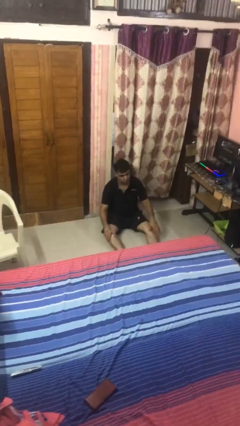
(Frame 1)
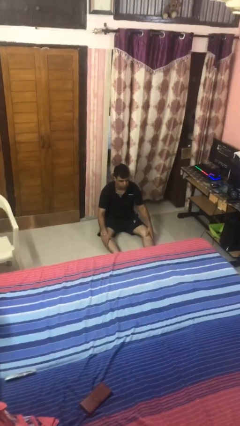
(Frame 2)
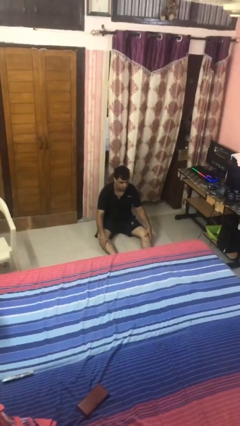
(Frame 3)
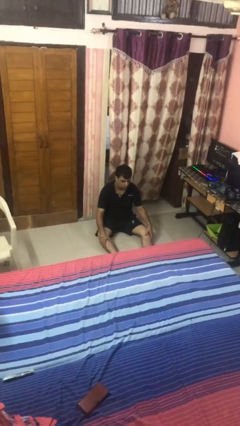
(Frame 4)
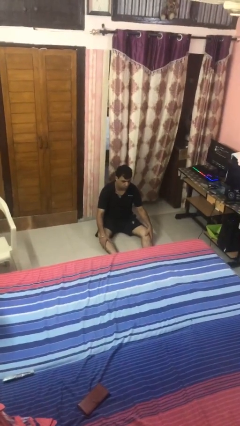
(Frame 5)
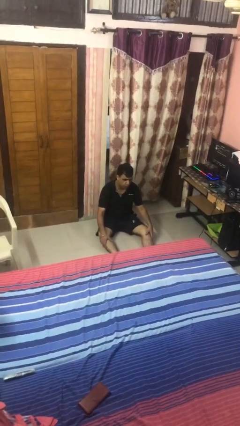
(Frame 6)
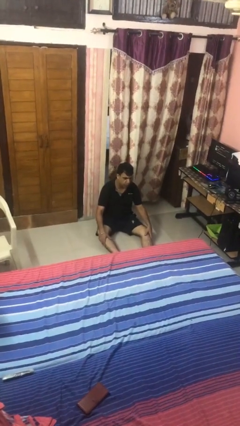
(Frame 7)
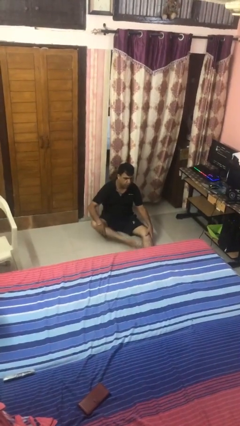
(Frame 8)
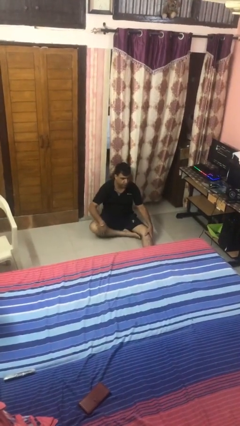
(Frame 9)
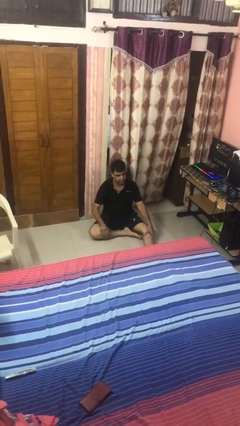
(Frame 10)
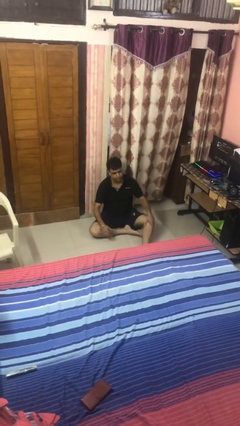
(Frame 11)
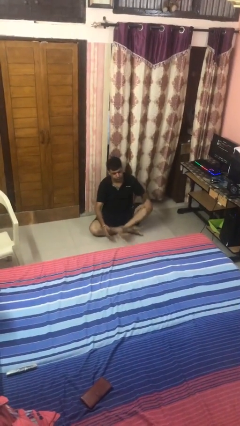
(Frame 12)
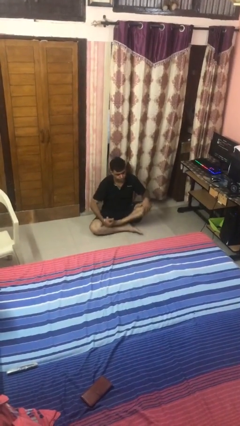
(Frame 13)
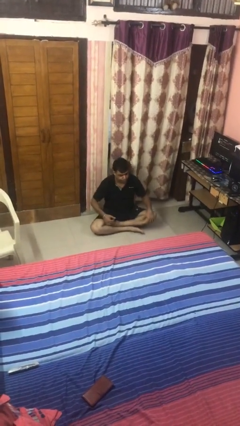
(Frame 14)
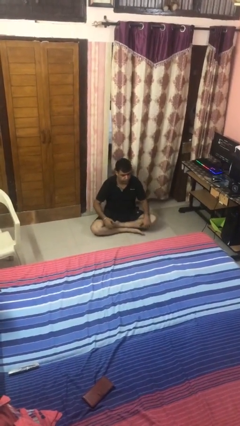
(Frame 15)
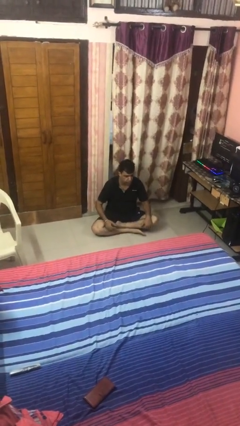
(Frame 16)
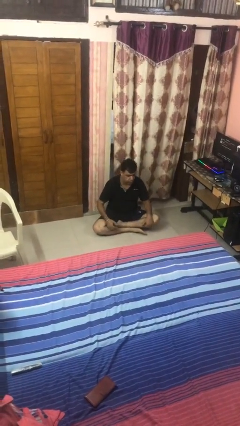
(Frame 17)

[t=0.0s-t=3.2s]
person crosses legs

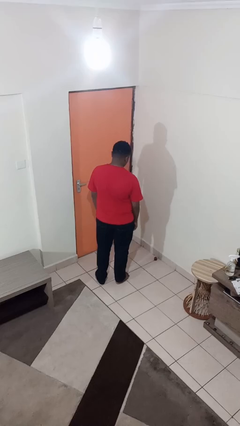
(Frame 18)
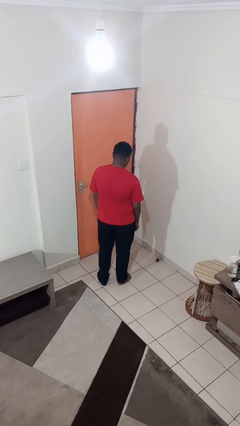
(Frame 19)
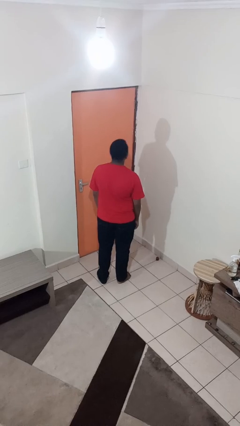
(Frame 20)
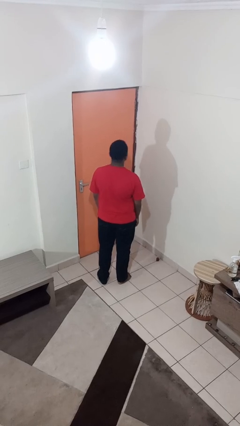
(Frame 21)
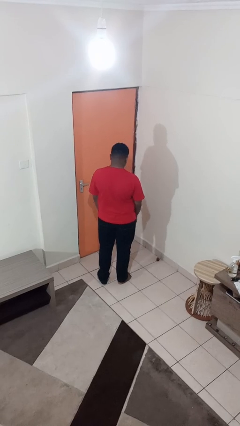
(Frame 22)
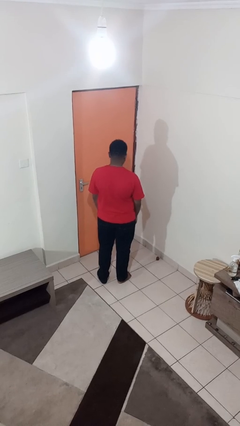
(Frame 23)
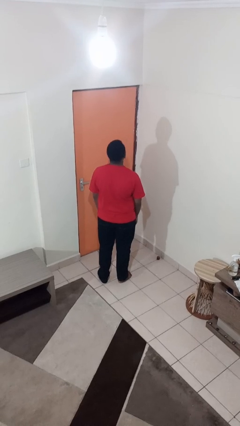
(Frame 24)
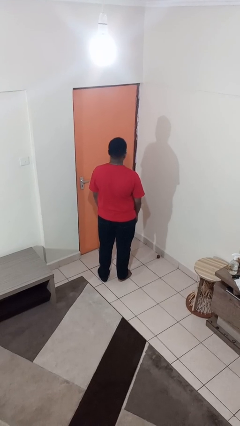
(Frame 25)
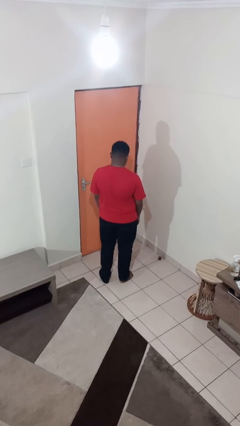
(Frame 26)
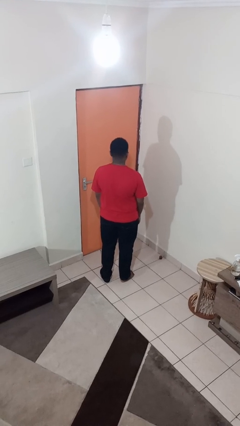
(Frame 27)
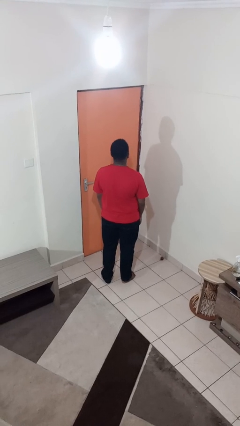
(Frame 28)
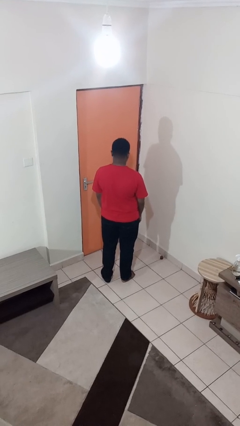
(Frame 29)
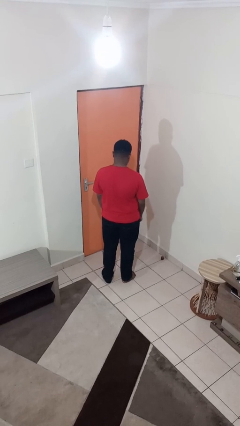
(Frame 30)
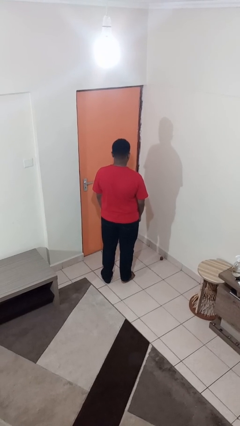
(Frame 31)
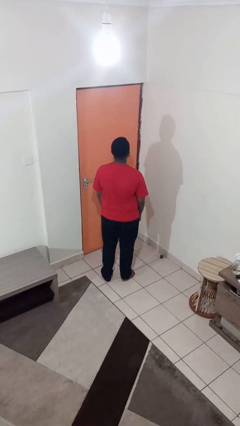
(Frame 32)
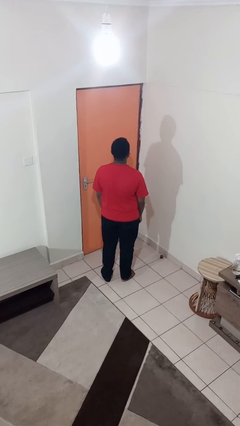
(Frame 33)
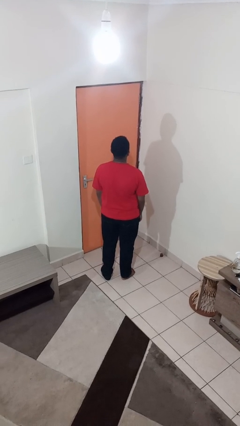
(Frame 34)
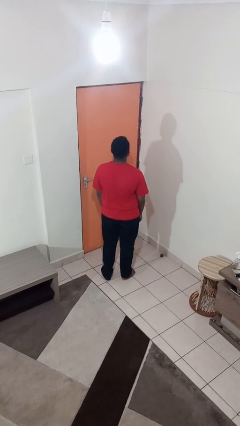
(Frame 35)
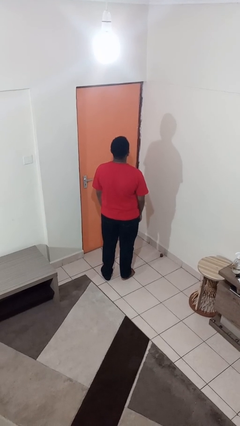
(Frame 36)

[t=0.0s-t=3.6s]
person nods head

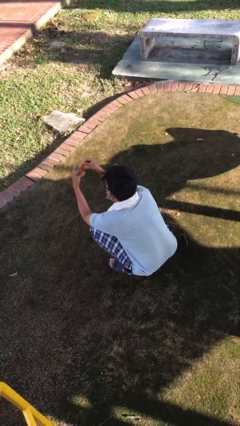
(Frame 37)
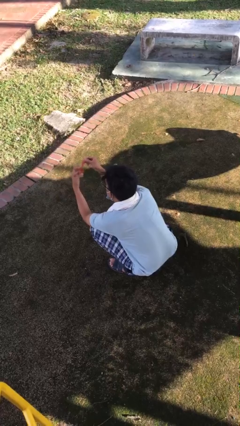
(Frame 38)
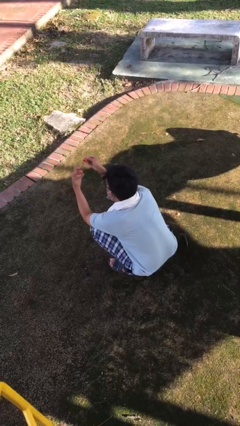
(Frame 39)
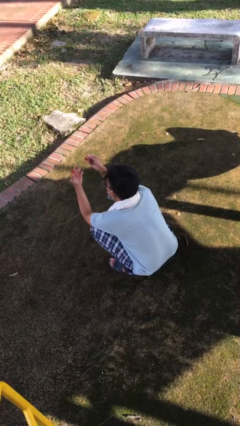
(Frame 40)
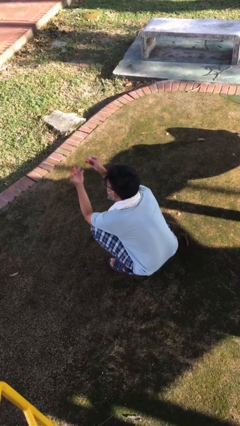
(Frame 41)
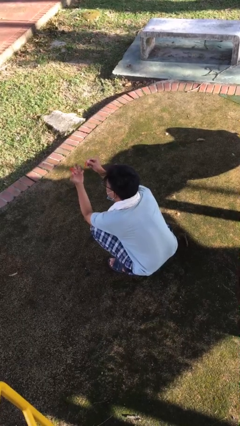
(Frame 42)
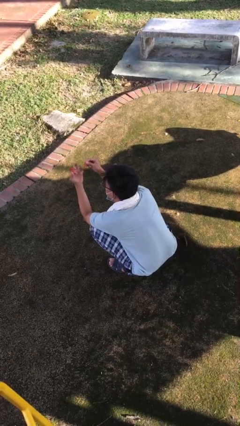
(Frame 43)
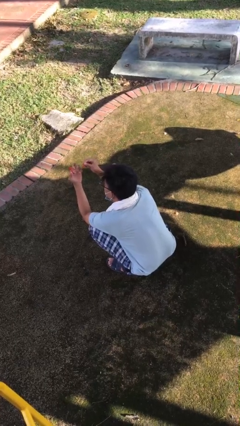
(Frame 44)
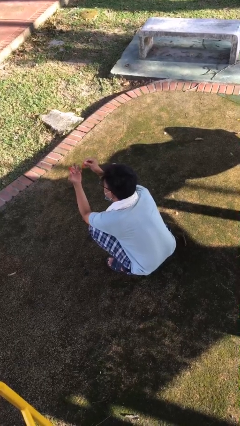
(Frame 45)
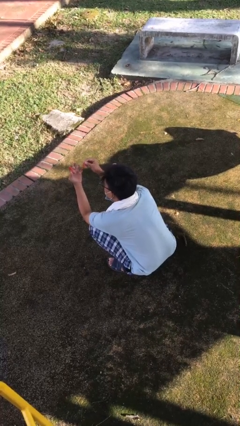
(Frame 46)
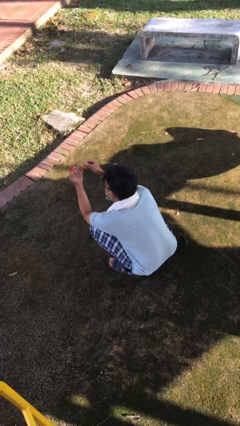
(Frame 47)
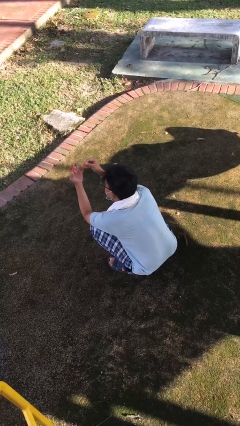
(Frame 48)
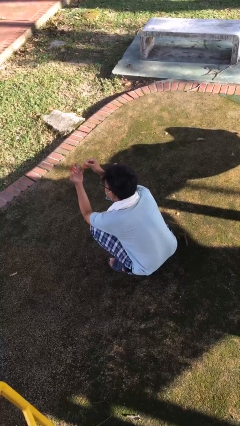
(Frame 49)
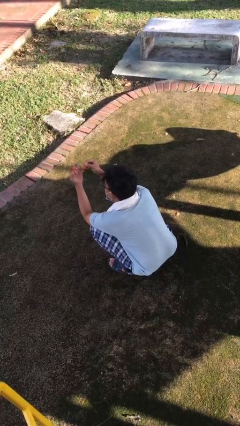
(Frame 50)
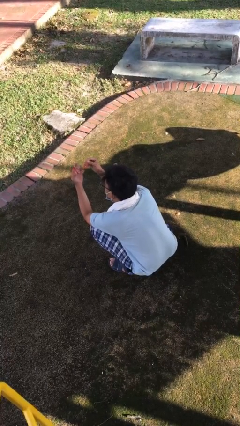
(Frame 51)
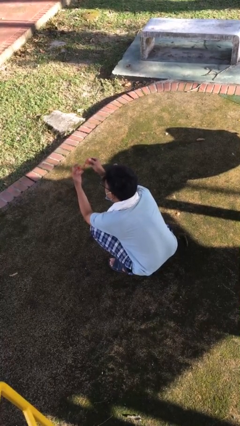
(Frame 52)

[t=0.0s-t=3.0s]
person paints fingernails

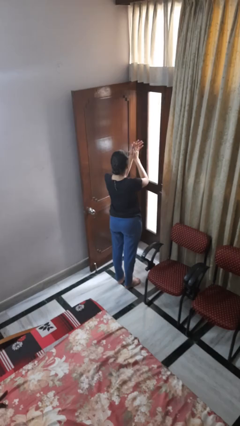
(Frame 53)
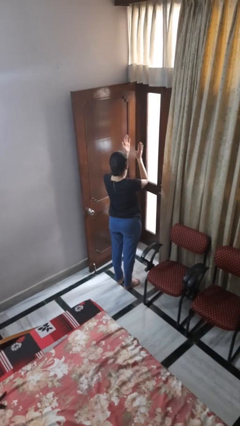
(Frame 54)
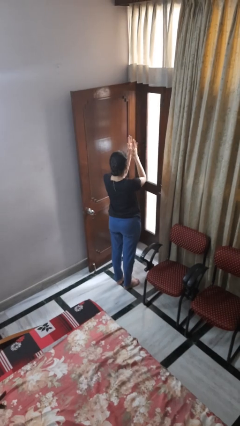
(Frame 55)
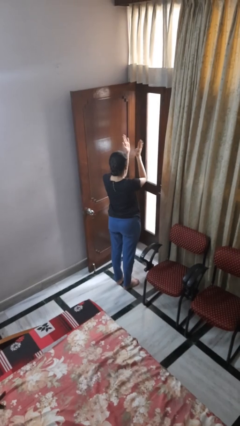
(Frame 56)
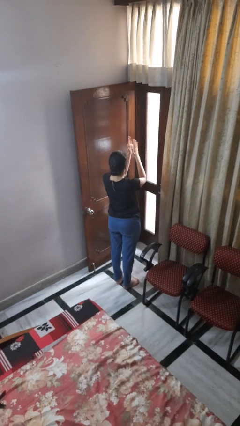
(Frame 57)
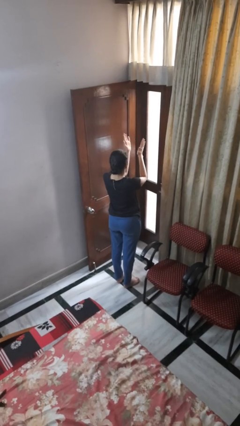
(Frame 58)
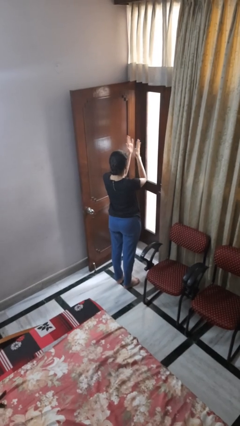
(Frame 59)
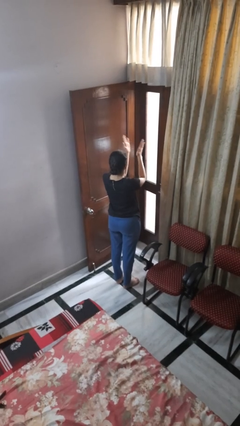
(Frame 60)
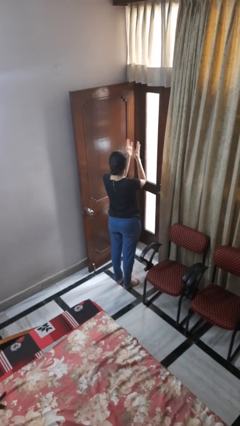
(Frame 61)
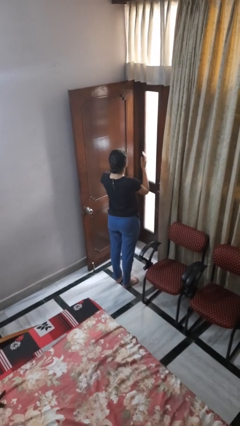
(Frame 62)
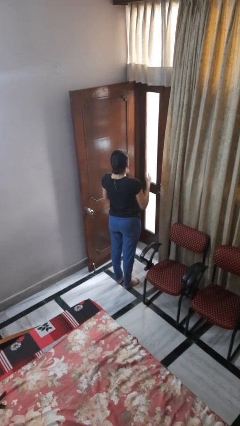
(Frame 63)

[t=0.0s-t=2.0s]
person claps hands

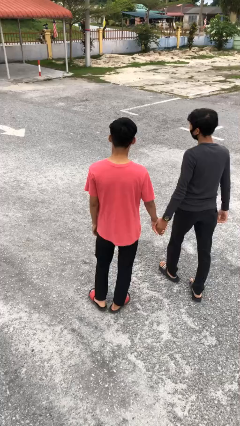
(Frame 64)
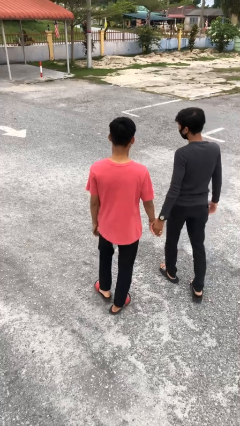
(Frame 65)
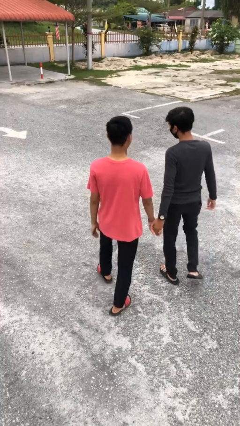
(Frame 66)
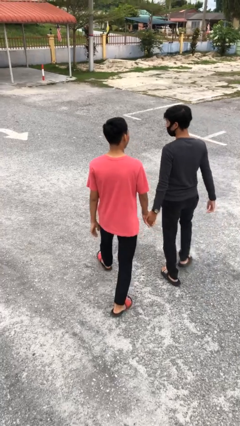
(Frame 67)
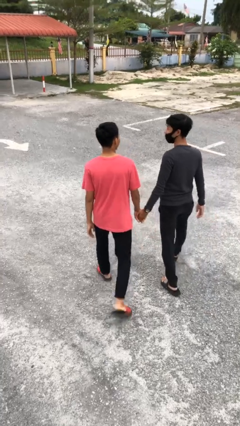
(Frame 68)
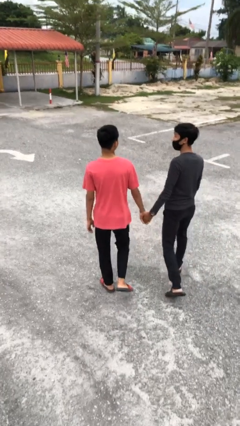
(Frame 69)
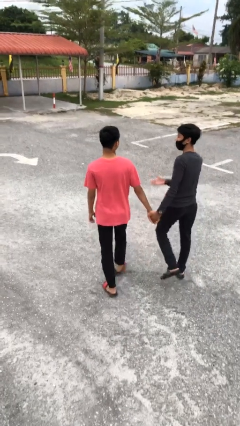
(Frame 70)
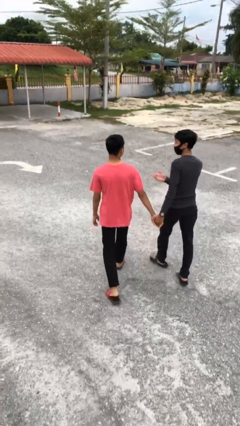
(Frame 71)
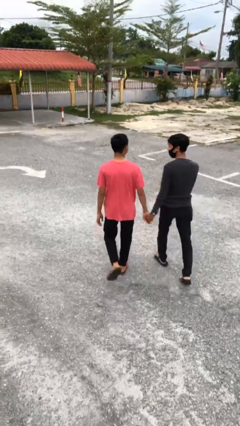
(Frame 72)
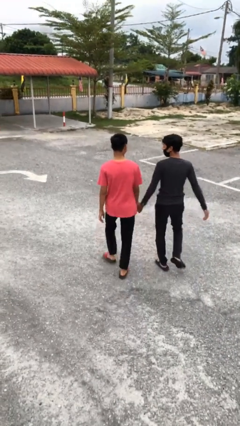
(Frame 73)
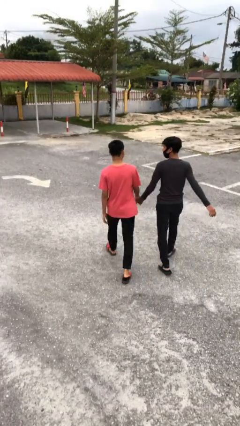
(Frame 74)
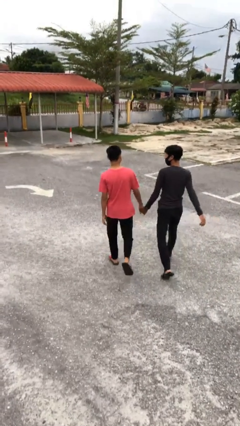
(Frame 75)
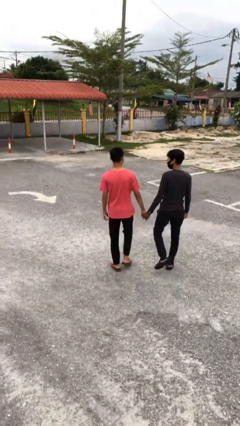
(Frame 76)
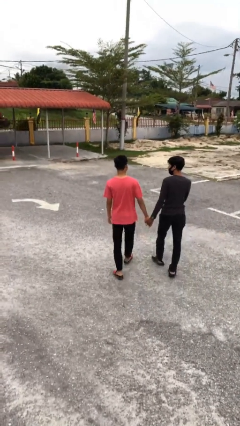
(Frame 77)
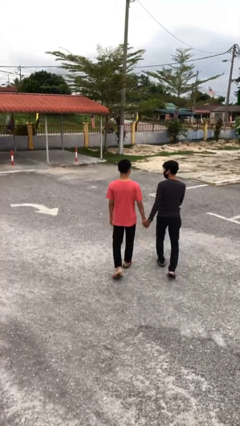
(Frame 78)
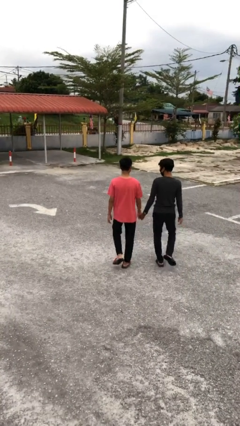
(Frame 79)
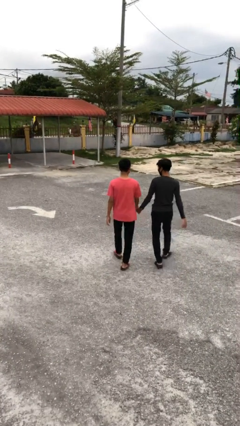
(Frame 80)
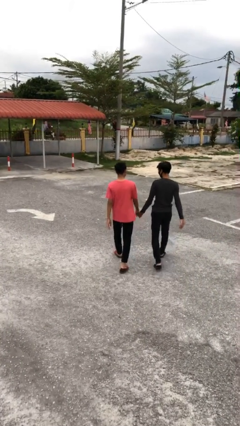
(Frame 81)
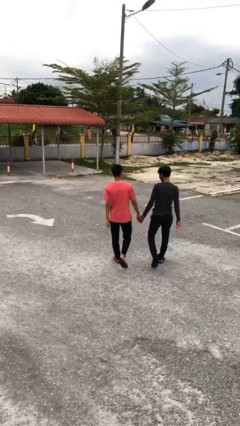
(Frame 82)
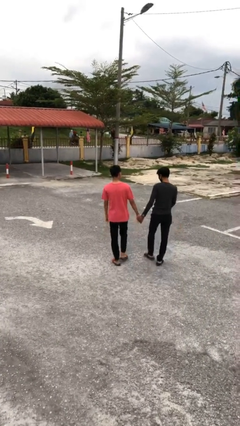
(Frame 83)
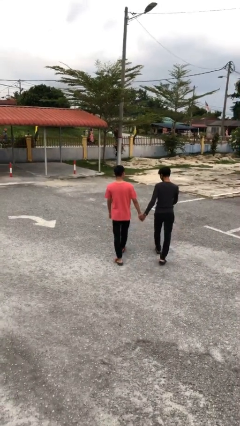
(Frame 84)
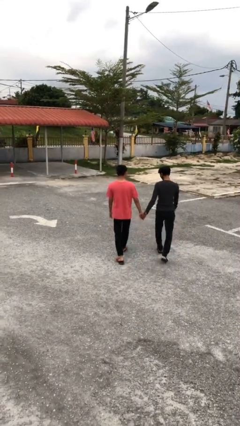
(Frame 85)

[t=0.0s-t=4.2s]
person holds hand

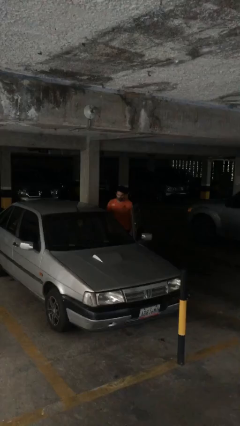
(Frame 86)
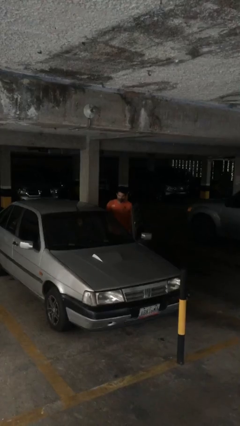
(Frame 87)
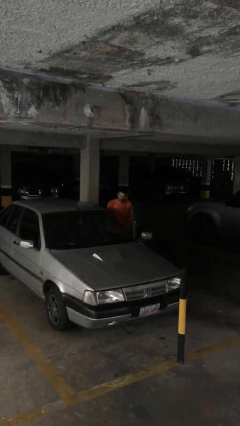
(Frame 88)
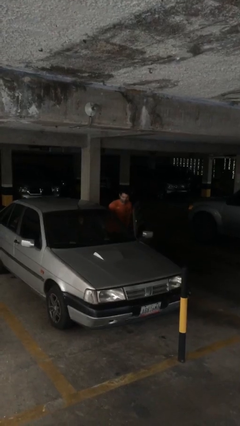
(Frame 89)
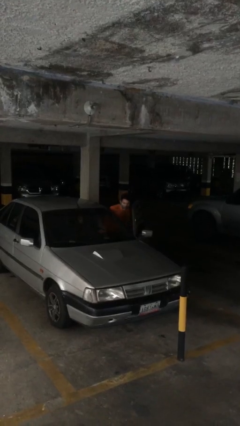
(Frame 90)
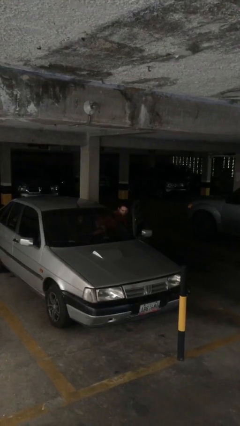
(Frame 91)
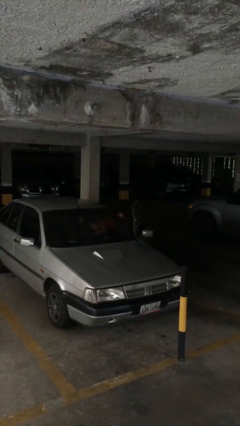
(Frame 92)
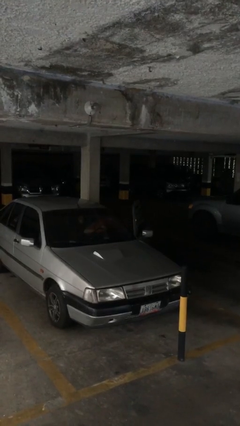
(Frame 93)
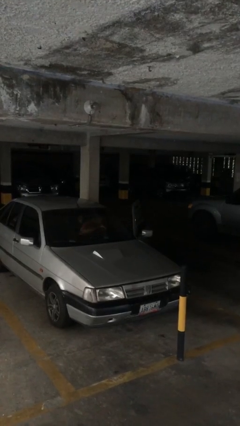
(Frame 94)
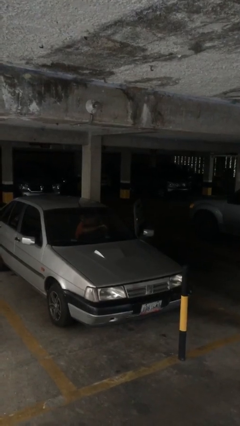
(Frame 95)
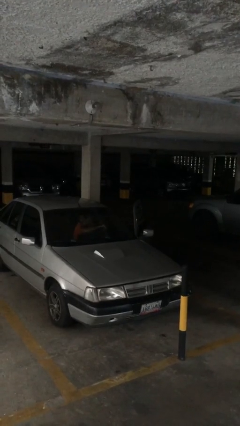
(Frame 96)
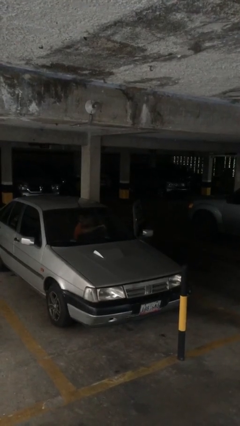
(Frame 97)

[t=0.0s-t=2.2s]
person enters car
